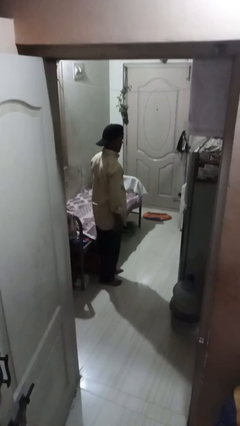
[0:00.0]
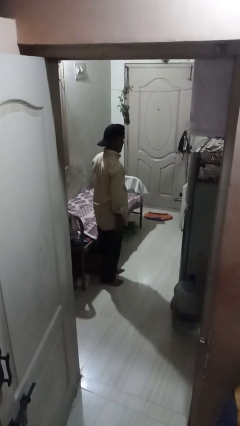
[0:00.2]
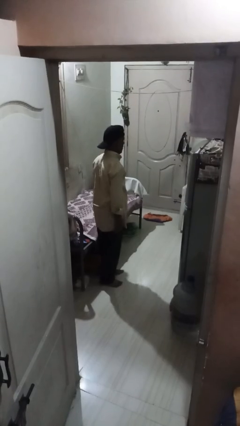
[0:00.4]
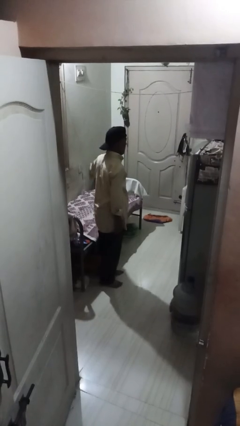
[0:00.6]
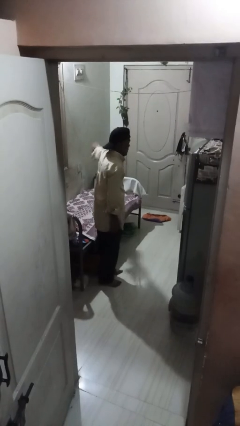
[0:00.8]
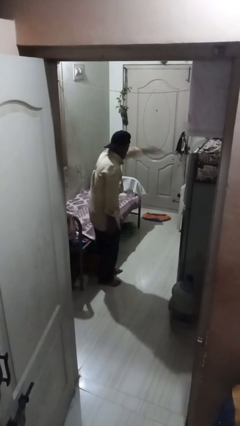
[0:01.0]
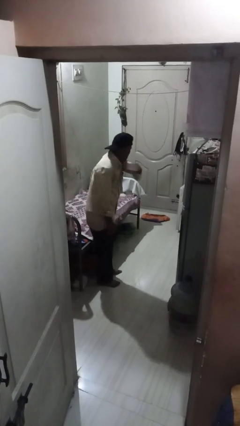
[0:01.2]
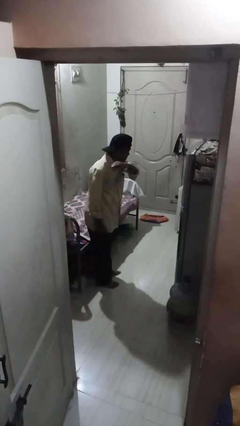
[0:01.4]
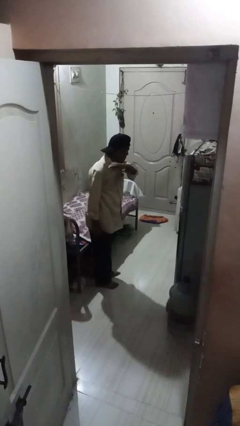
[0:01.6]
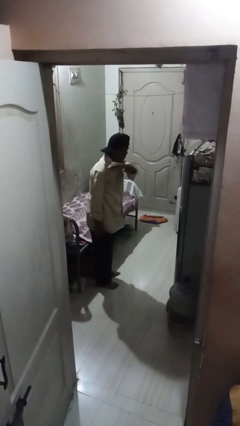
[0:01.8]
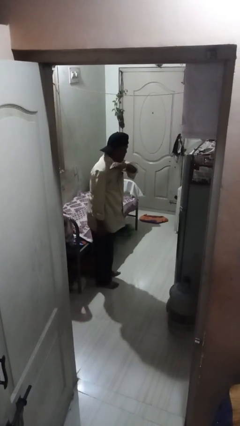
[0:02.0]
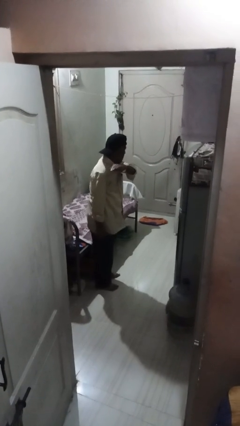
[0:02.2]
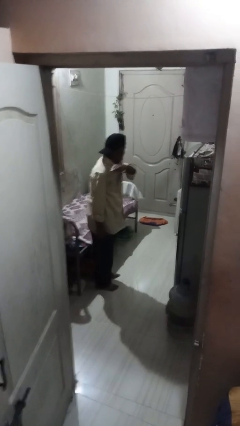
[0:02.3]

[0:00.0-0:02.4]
person karate chop

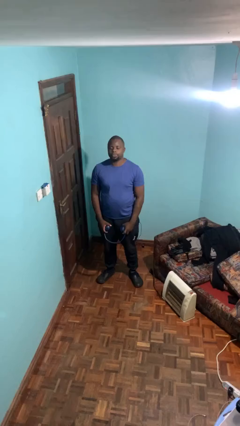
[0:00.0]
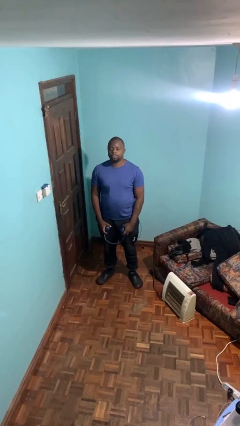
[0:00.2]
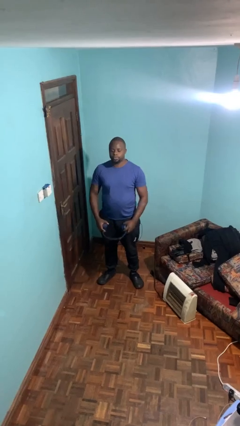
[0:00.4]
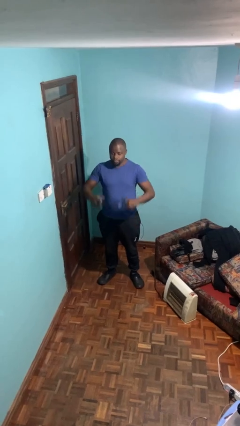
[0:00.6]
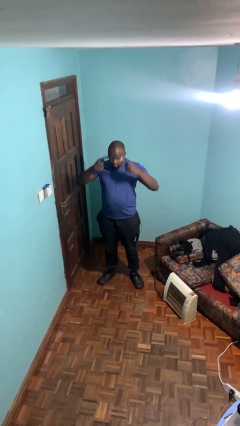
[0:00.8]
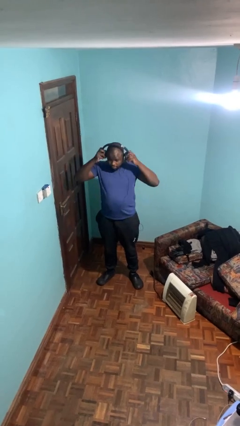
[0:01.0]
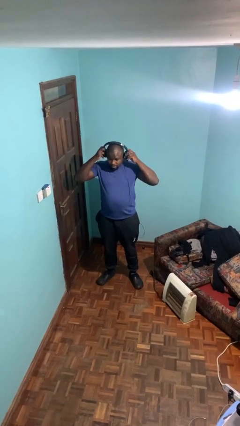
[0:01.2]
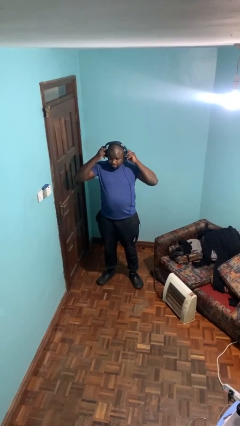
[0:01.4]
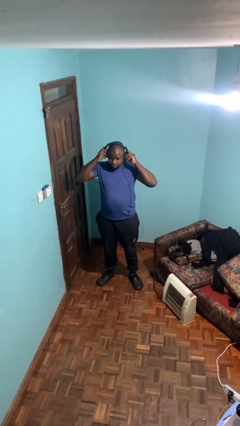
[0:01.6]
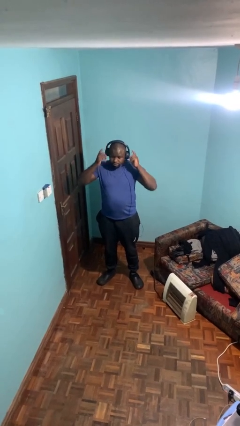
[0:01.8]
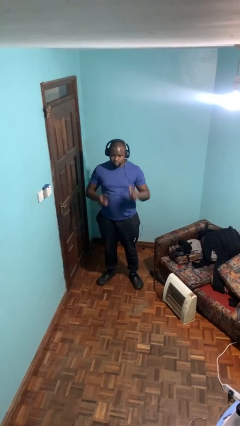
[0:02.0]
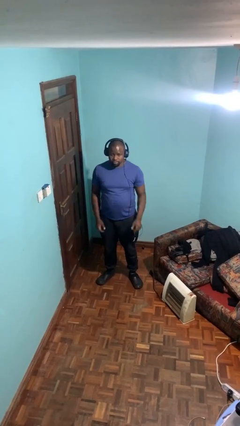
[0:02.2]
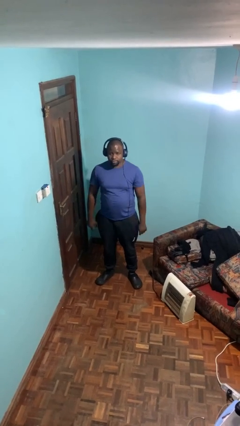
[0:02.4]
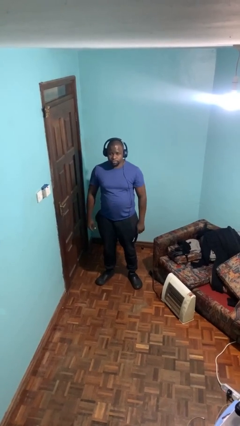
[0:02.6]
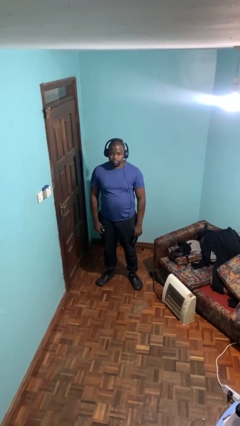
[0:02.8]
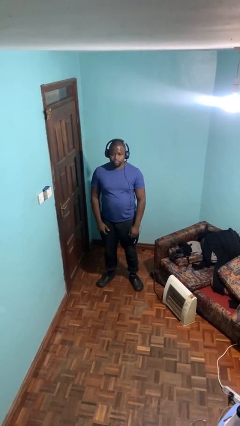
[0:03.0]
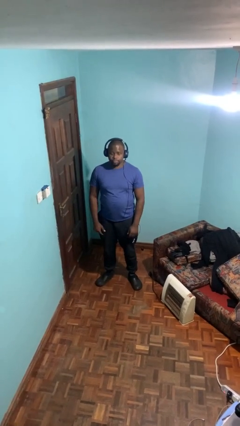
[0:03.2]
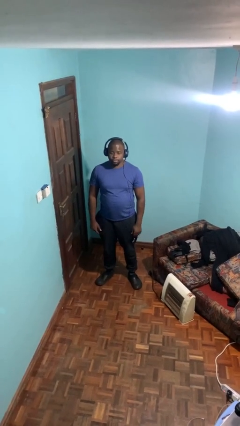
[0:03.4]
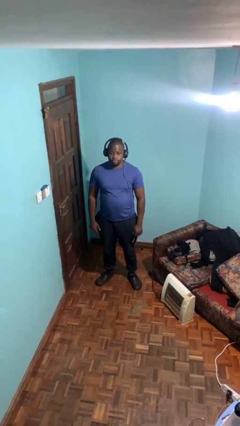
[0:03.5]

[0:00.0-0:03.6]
person puts on headphones

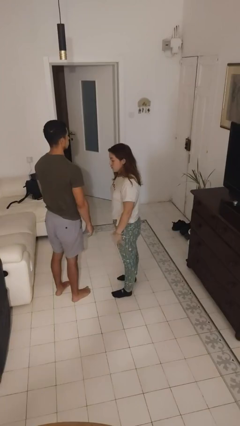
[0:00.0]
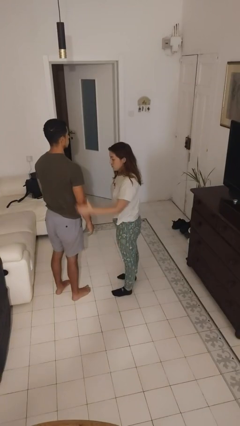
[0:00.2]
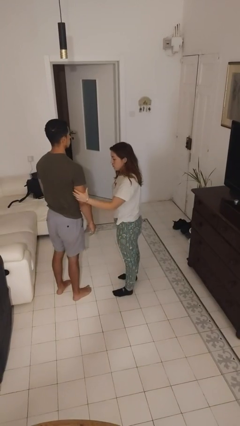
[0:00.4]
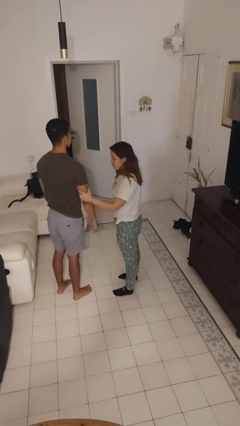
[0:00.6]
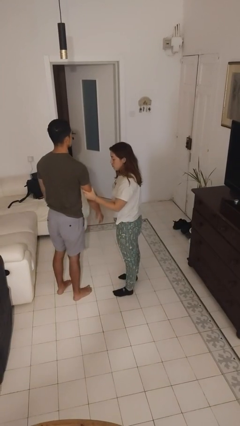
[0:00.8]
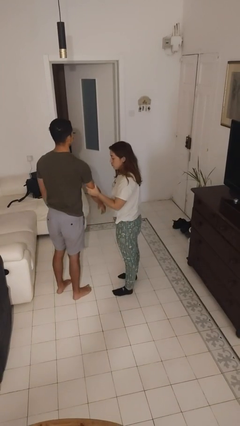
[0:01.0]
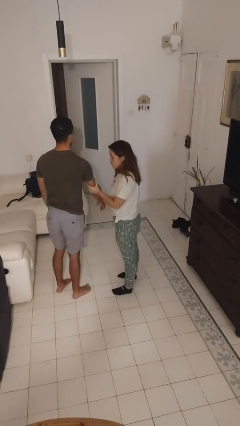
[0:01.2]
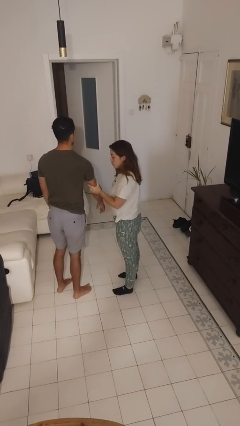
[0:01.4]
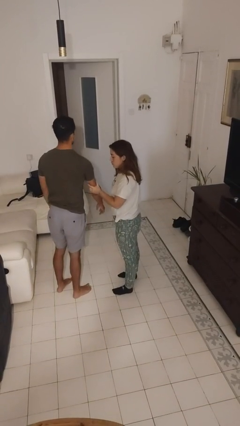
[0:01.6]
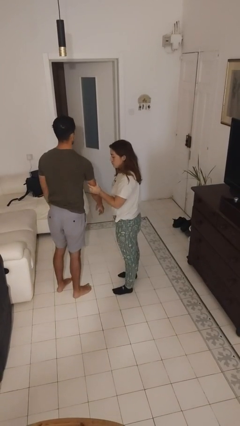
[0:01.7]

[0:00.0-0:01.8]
person grabs person by bicep

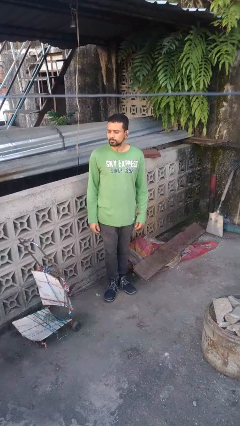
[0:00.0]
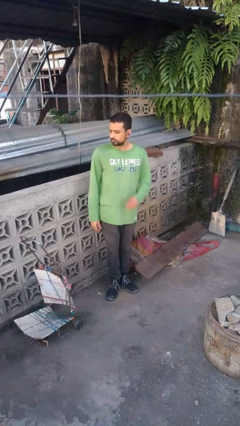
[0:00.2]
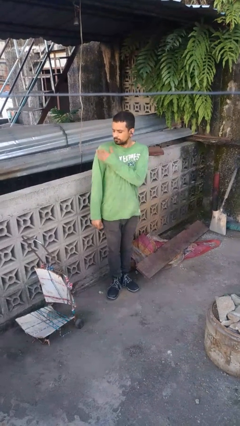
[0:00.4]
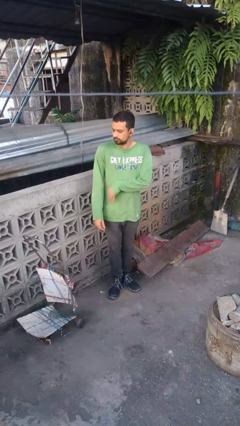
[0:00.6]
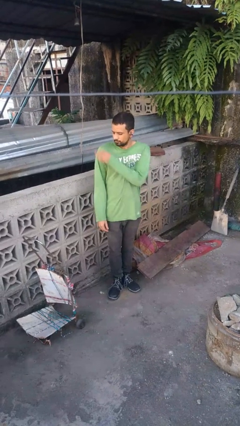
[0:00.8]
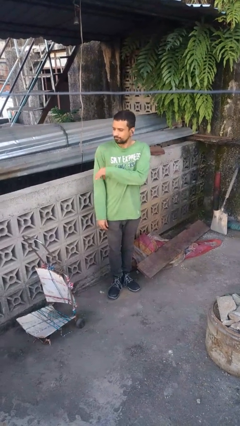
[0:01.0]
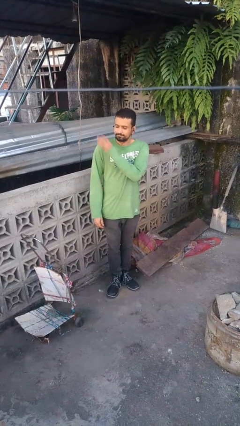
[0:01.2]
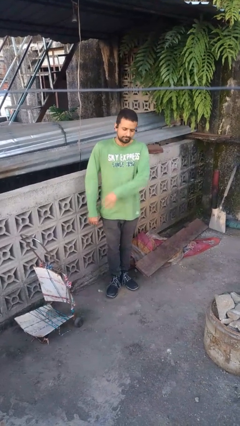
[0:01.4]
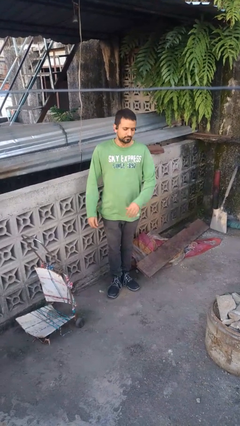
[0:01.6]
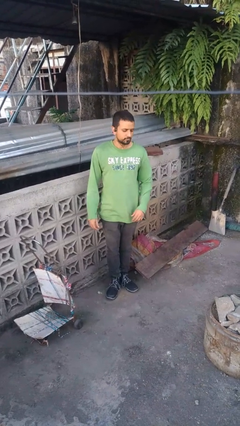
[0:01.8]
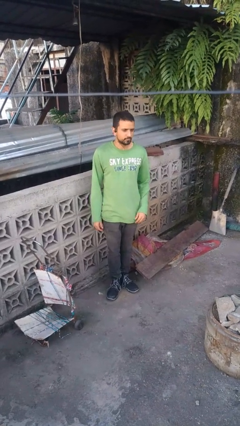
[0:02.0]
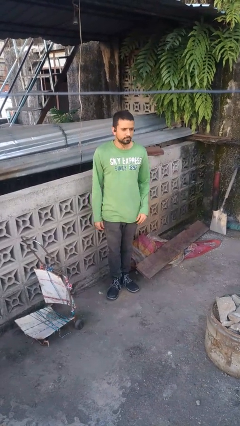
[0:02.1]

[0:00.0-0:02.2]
person swats bug

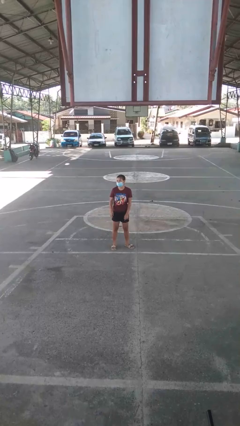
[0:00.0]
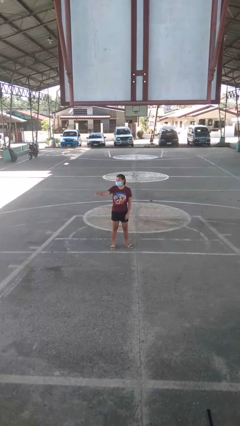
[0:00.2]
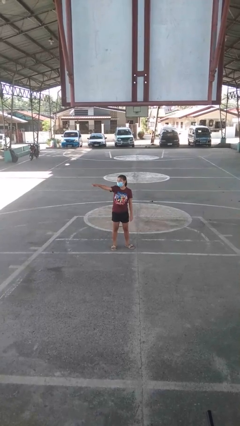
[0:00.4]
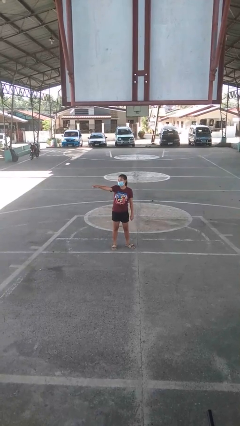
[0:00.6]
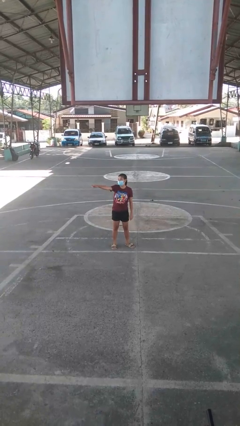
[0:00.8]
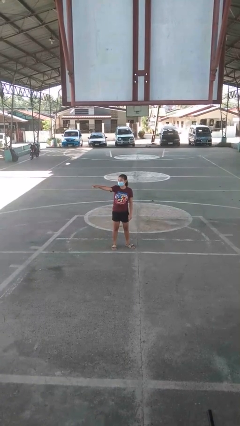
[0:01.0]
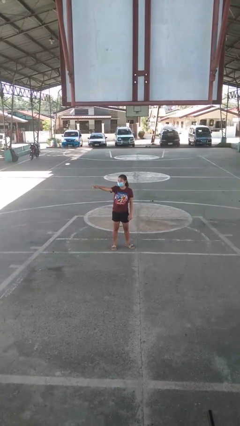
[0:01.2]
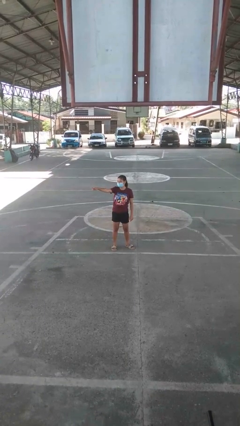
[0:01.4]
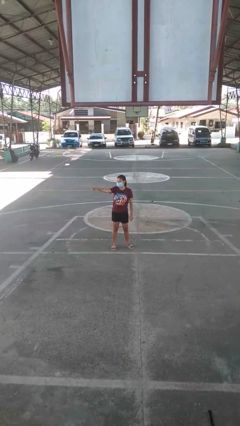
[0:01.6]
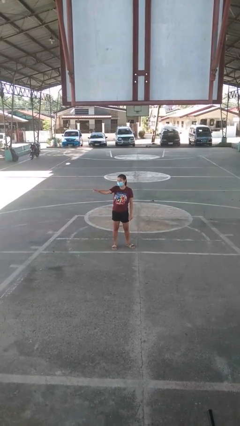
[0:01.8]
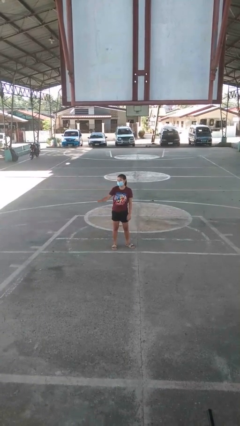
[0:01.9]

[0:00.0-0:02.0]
person points at person

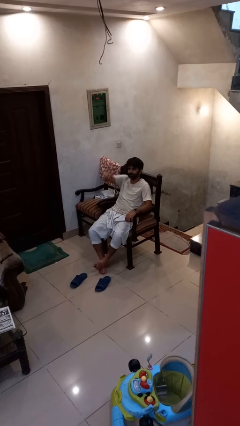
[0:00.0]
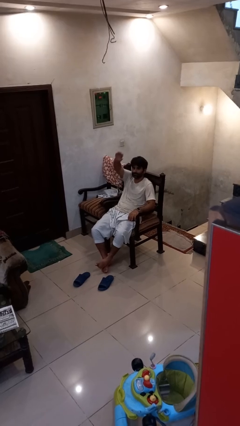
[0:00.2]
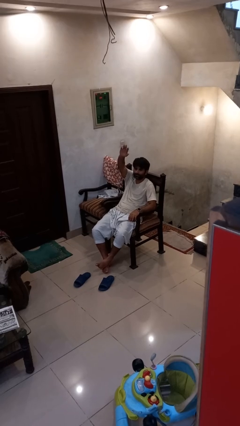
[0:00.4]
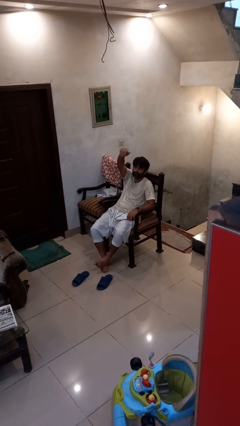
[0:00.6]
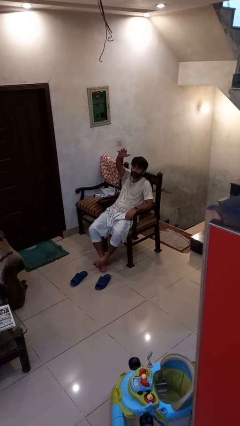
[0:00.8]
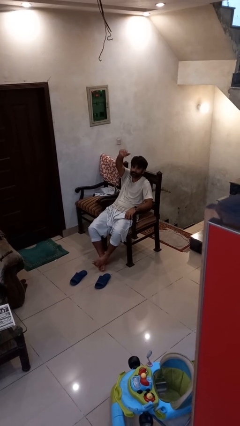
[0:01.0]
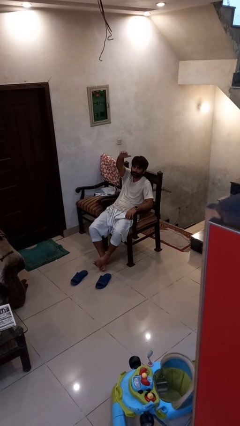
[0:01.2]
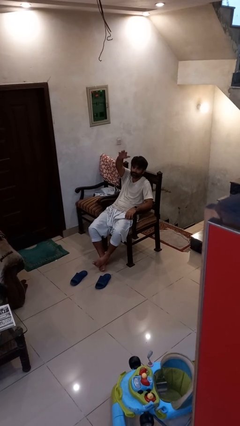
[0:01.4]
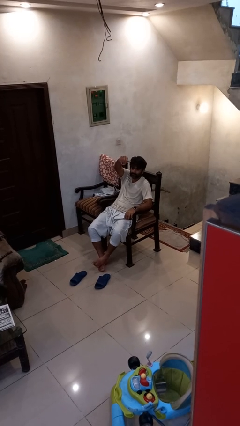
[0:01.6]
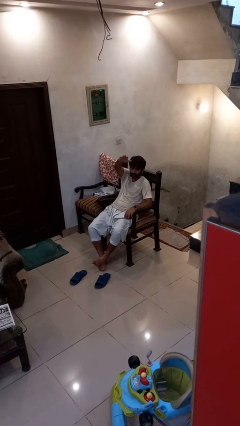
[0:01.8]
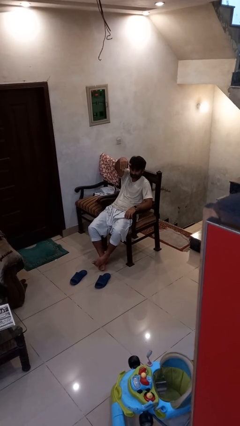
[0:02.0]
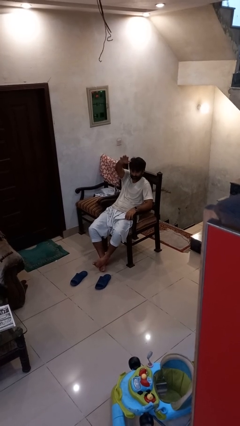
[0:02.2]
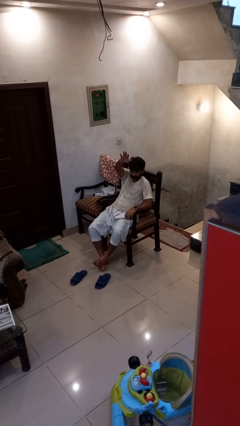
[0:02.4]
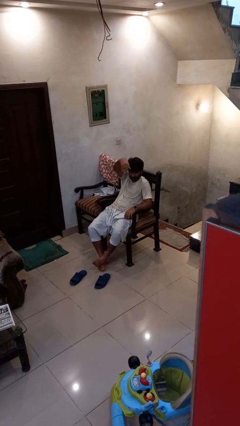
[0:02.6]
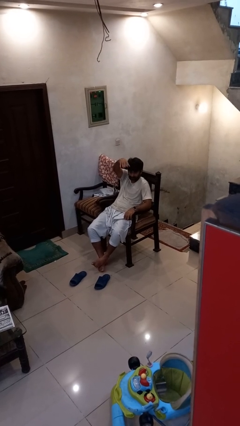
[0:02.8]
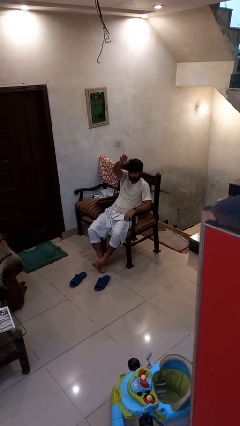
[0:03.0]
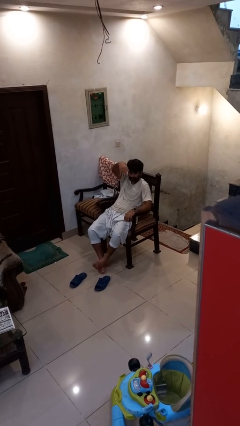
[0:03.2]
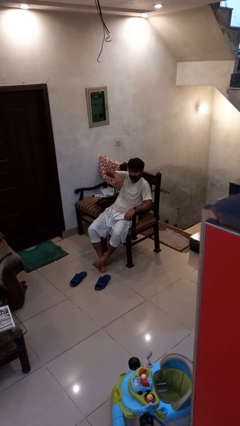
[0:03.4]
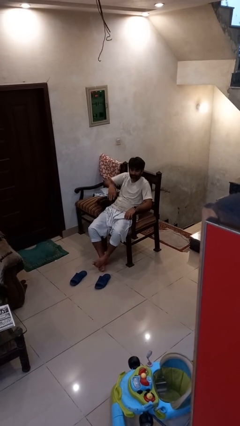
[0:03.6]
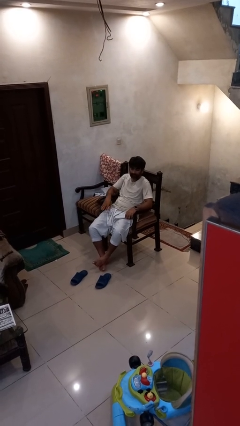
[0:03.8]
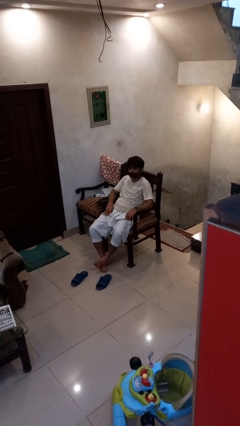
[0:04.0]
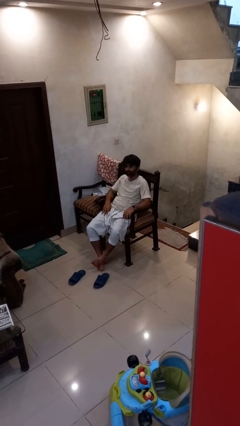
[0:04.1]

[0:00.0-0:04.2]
person gestures come here

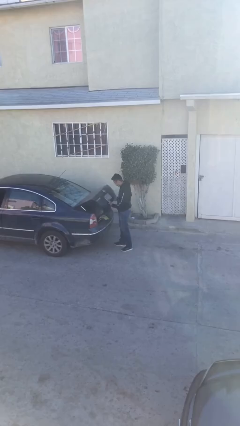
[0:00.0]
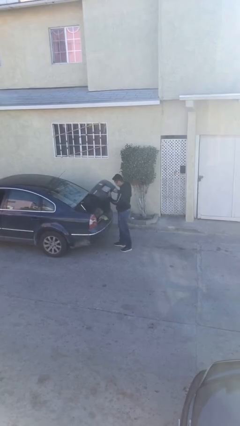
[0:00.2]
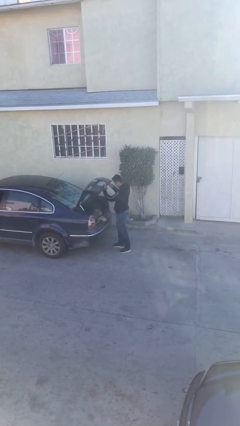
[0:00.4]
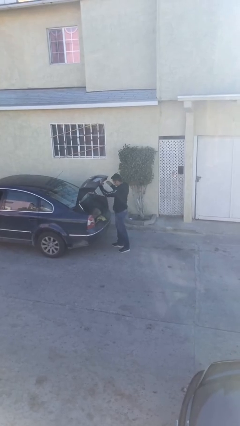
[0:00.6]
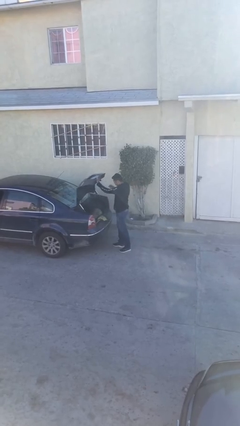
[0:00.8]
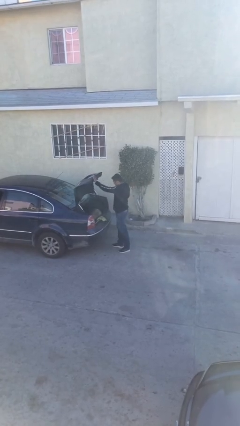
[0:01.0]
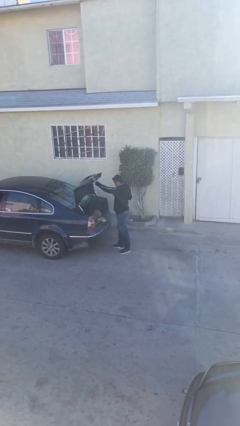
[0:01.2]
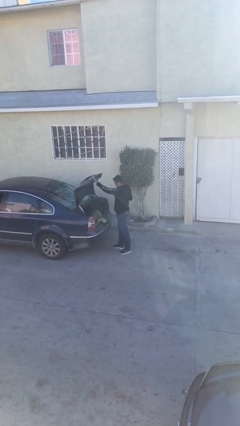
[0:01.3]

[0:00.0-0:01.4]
person opens car trunk
